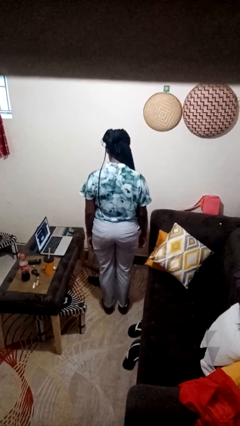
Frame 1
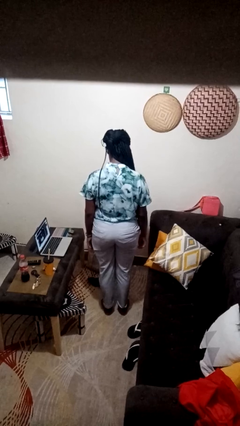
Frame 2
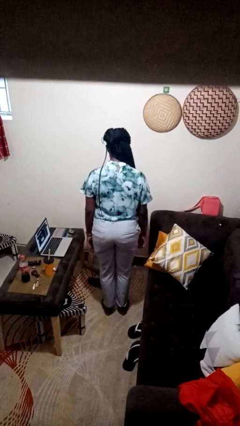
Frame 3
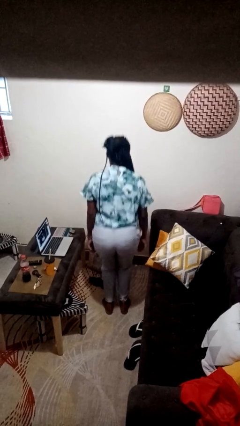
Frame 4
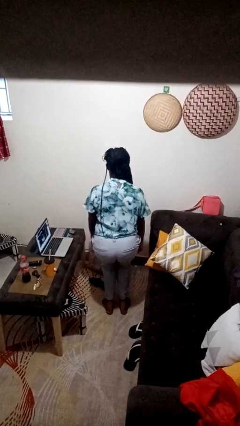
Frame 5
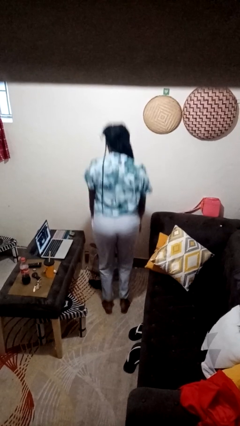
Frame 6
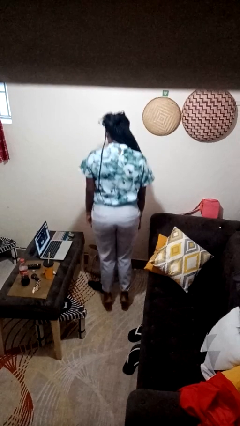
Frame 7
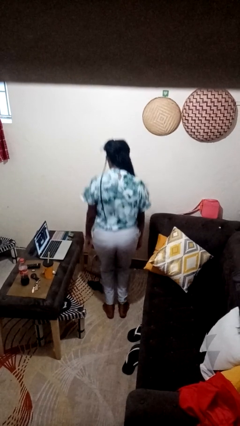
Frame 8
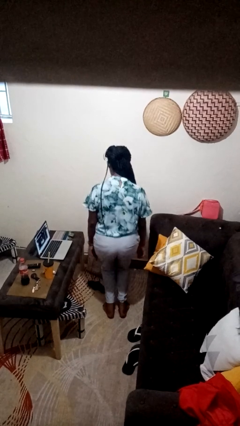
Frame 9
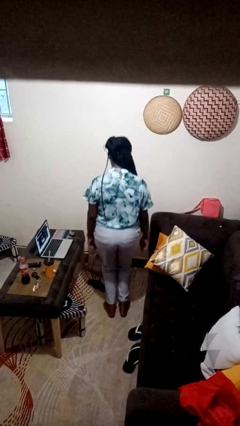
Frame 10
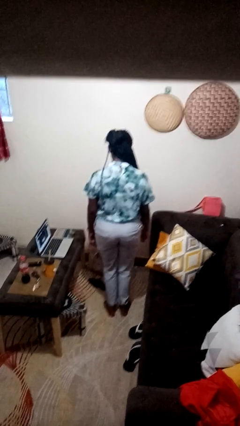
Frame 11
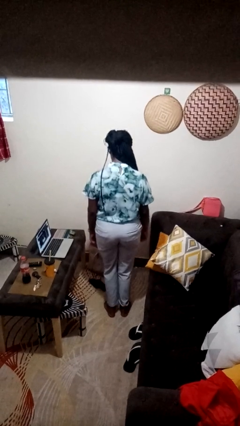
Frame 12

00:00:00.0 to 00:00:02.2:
person jumps

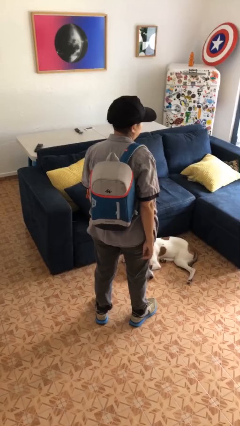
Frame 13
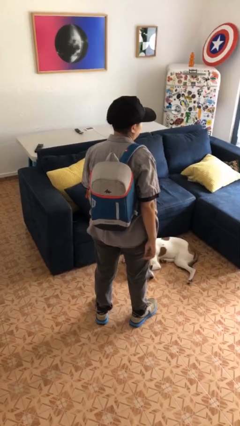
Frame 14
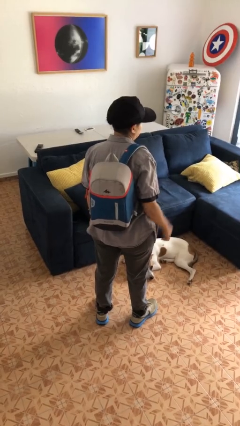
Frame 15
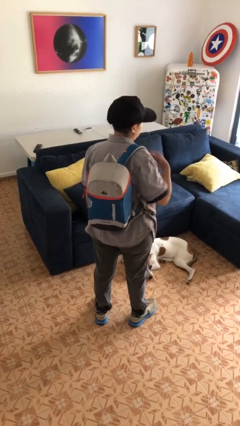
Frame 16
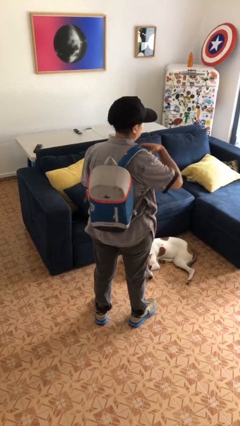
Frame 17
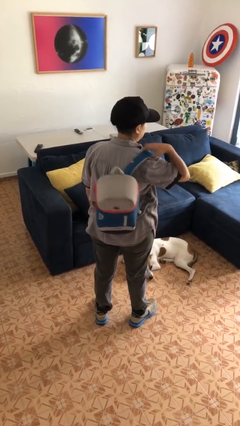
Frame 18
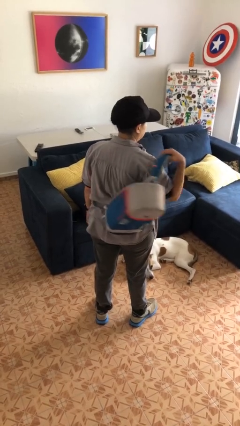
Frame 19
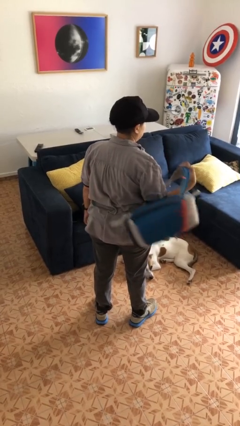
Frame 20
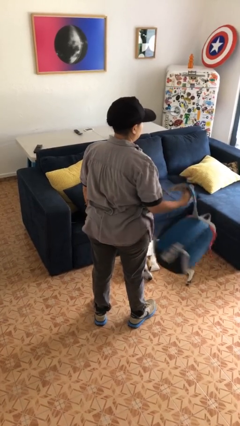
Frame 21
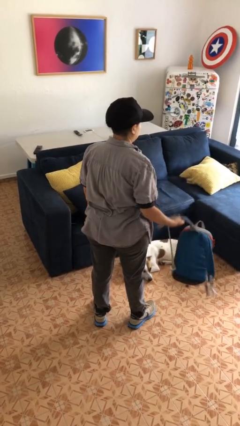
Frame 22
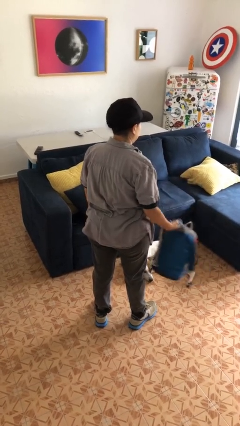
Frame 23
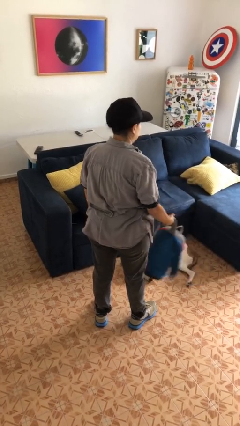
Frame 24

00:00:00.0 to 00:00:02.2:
person takes off backpack

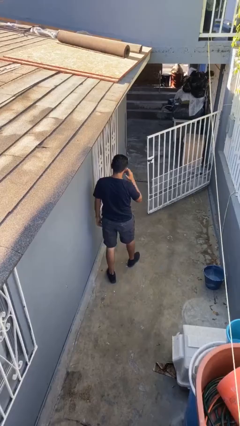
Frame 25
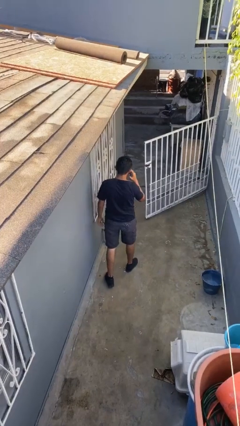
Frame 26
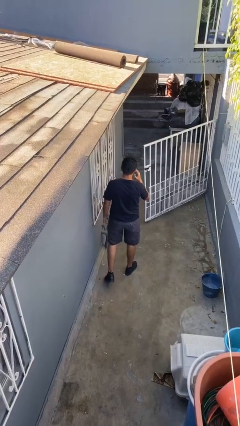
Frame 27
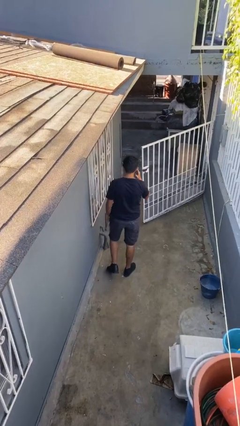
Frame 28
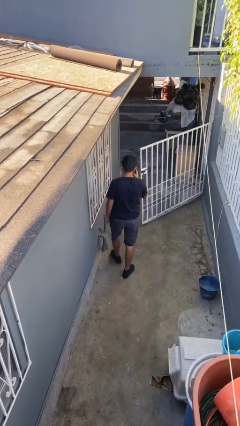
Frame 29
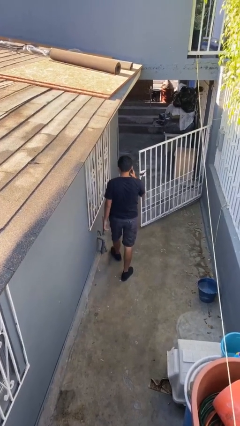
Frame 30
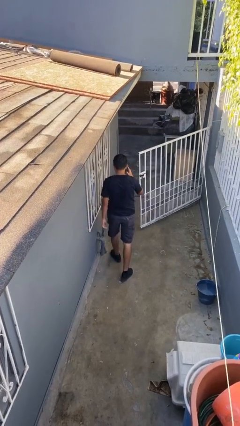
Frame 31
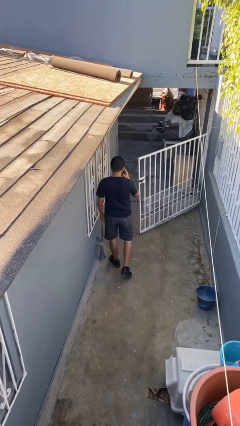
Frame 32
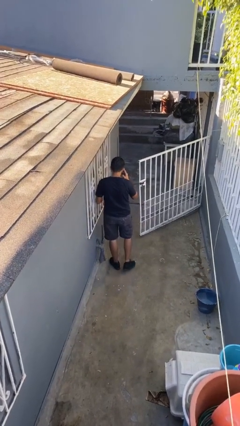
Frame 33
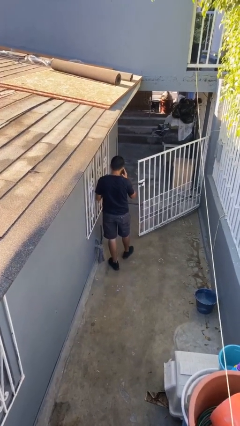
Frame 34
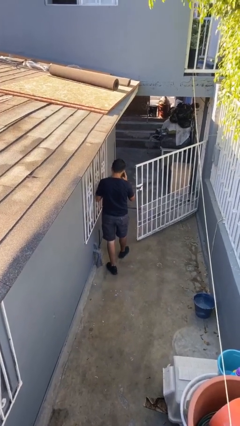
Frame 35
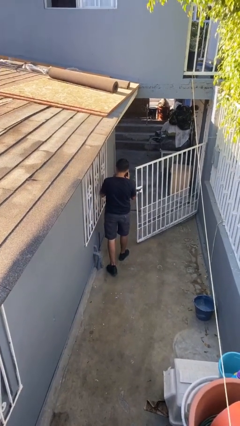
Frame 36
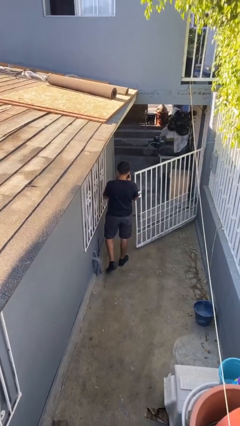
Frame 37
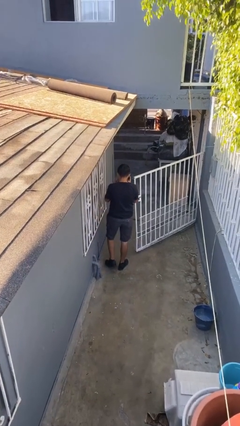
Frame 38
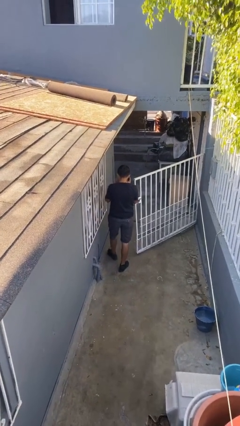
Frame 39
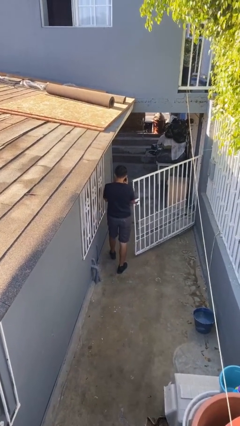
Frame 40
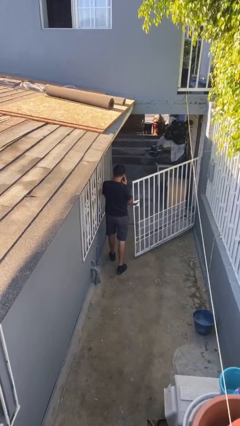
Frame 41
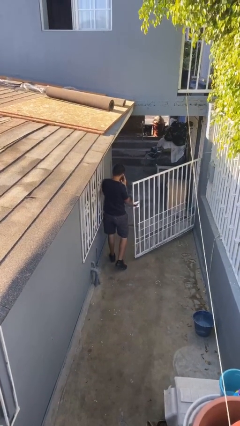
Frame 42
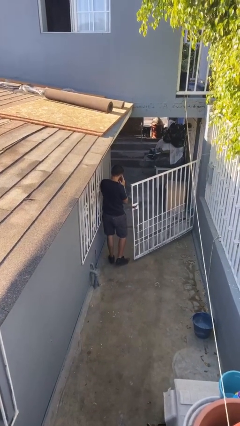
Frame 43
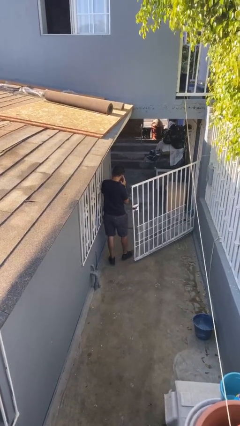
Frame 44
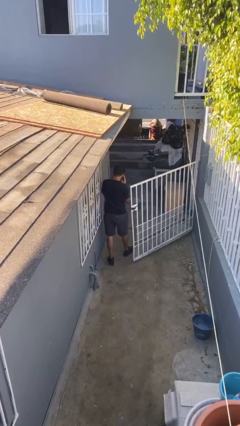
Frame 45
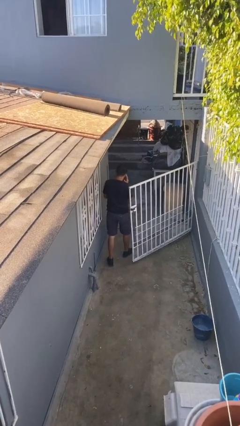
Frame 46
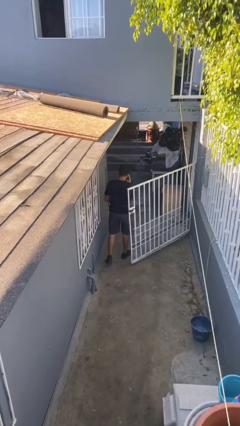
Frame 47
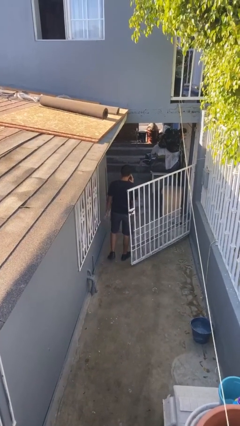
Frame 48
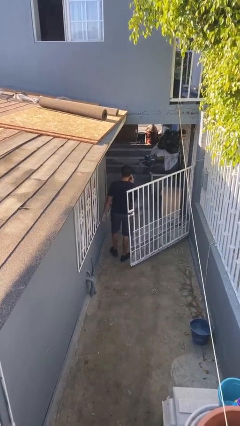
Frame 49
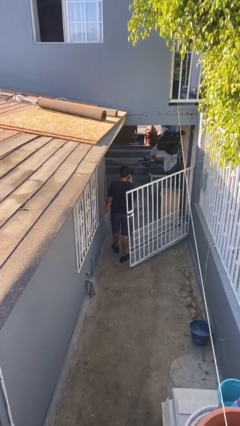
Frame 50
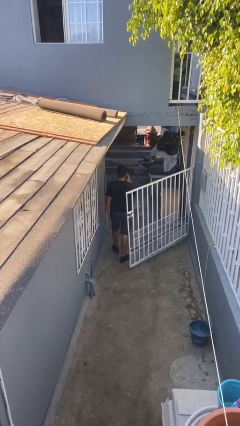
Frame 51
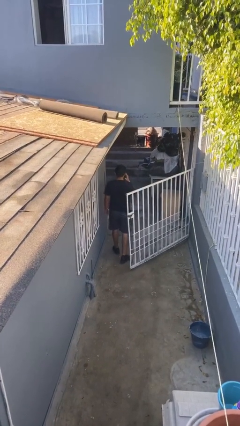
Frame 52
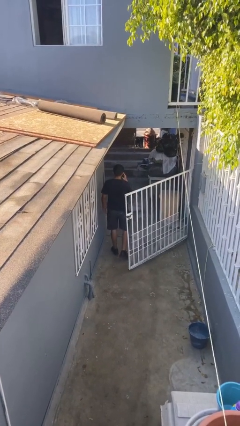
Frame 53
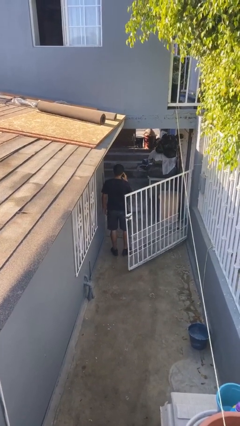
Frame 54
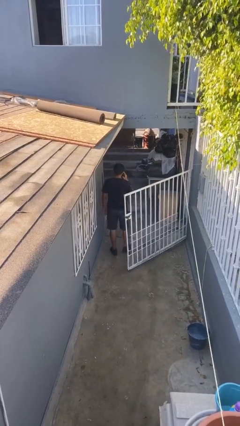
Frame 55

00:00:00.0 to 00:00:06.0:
person exits scene through structure

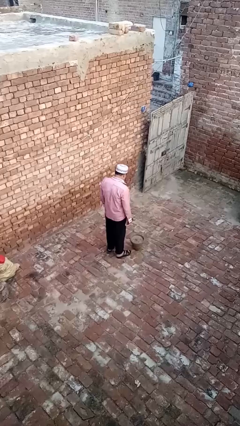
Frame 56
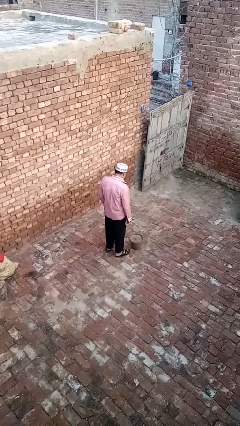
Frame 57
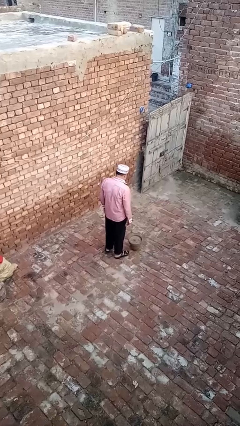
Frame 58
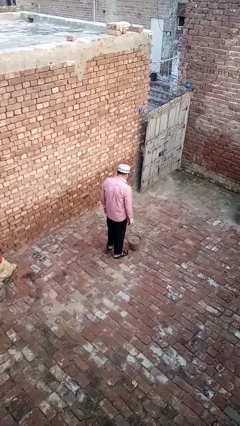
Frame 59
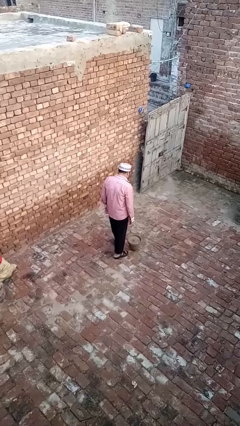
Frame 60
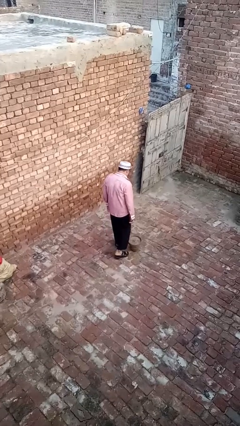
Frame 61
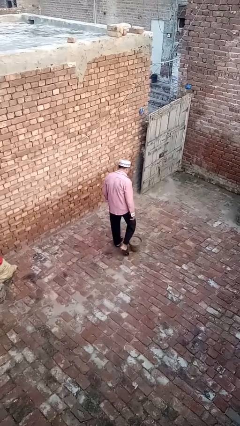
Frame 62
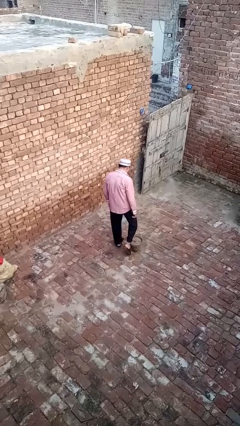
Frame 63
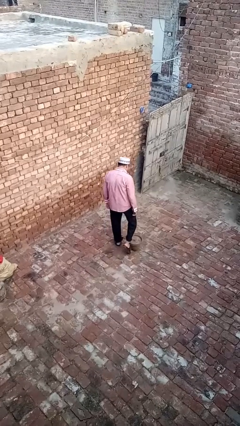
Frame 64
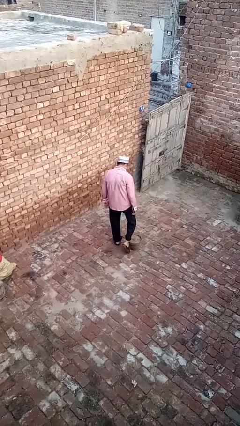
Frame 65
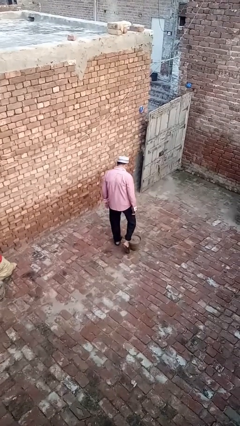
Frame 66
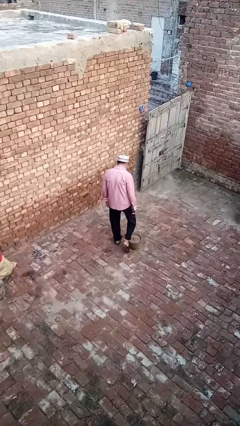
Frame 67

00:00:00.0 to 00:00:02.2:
person trips on object on floor

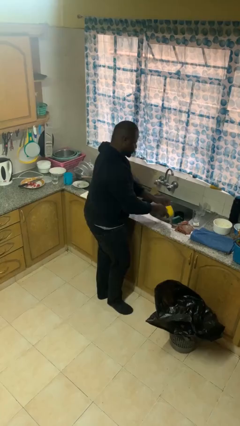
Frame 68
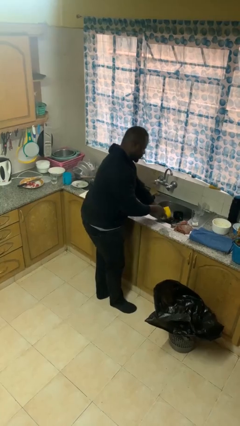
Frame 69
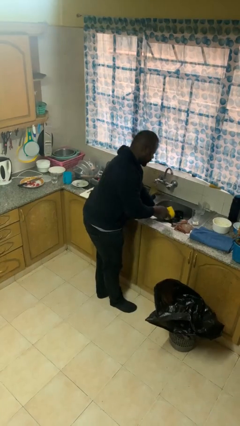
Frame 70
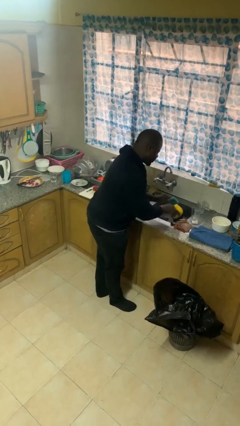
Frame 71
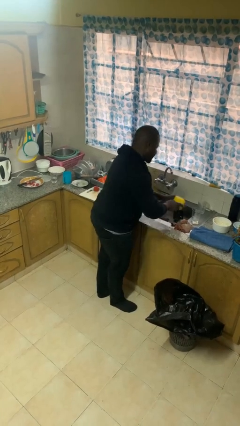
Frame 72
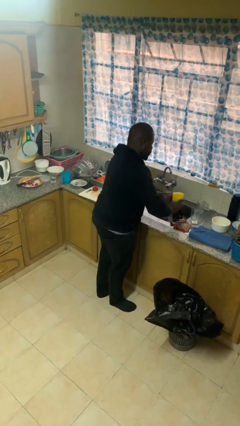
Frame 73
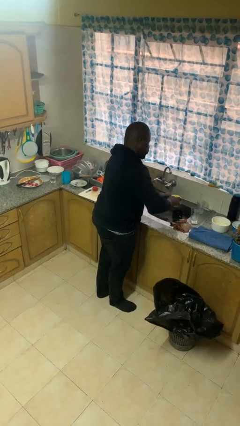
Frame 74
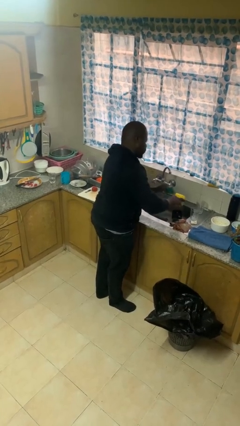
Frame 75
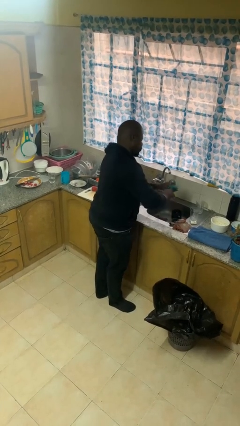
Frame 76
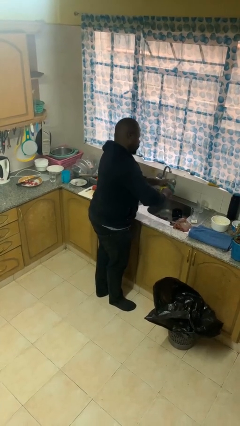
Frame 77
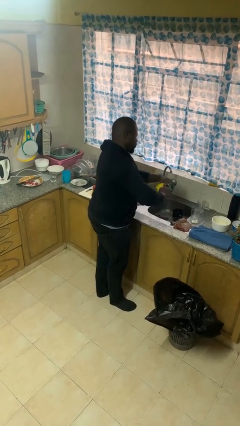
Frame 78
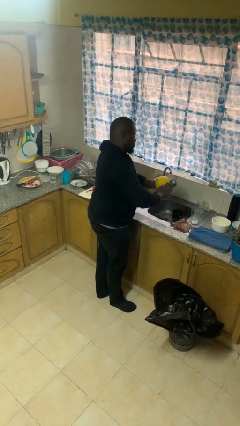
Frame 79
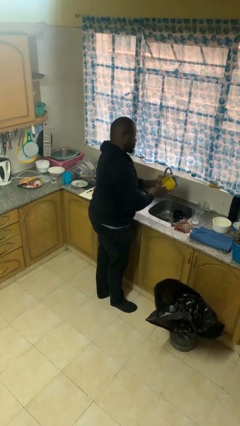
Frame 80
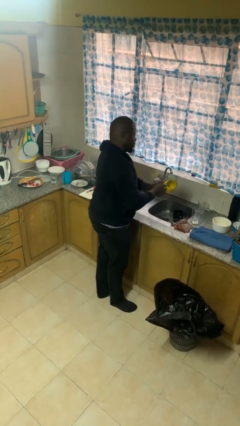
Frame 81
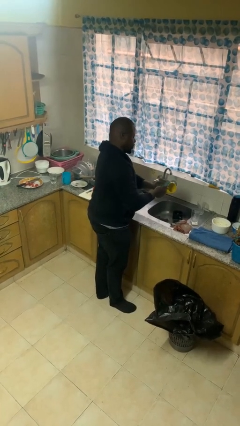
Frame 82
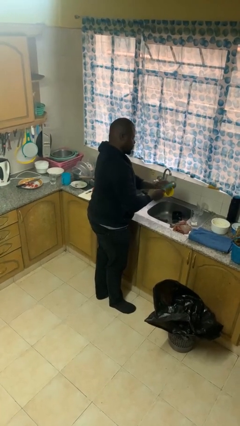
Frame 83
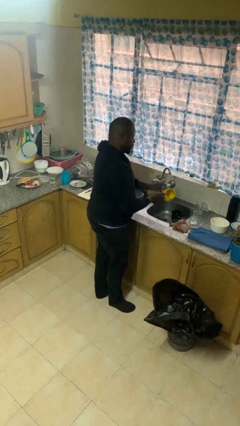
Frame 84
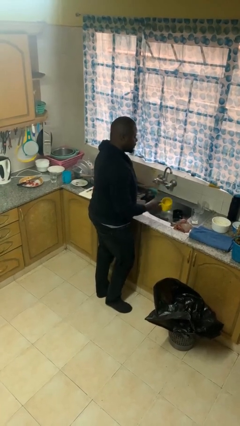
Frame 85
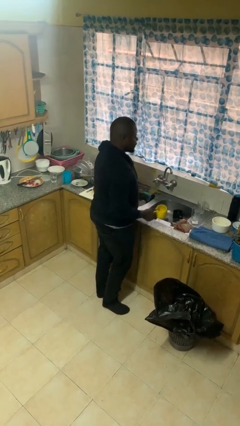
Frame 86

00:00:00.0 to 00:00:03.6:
person washes dish

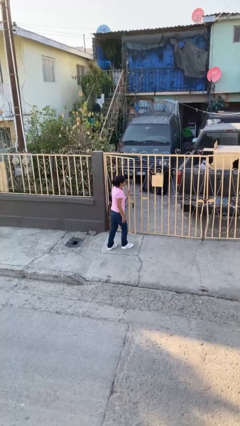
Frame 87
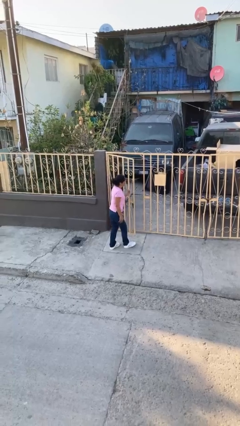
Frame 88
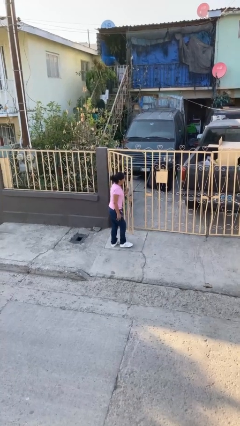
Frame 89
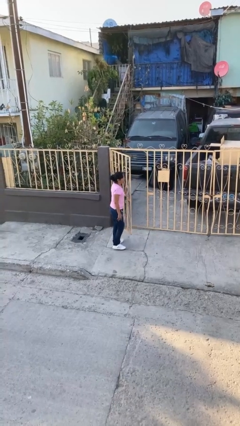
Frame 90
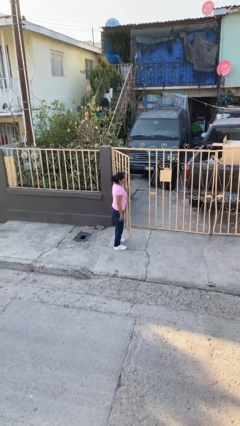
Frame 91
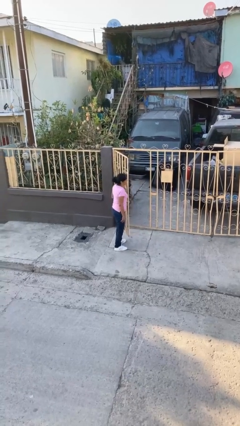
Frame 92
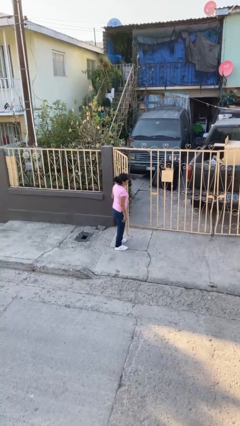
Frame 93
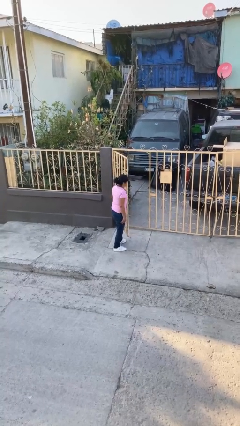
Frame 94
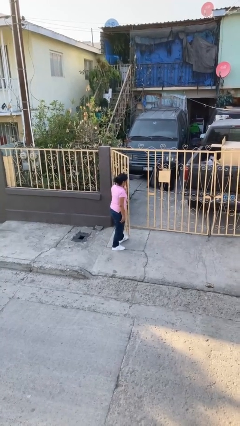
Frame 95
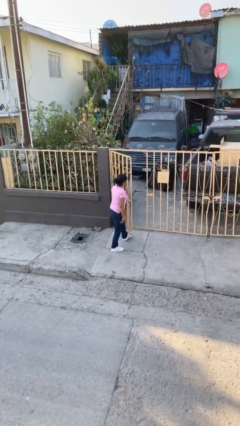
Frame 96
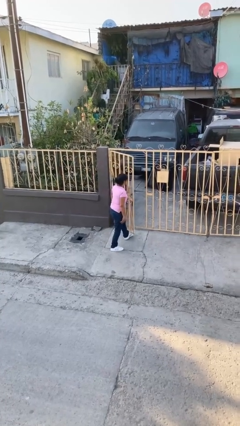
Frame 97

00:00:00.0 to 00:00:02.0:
person opens facility door
